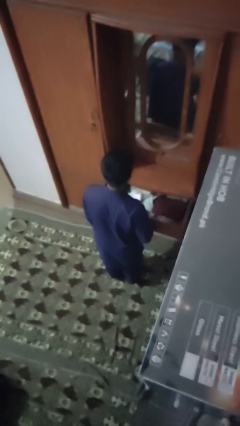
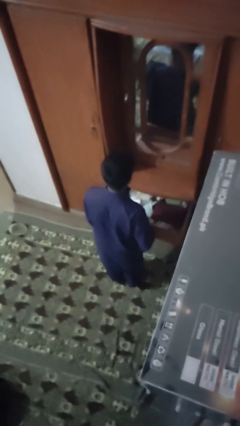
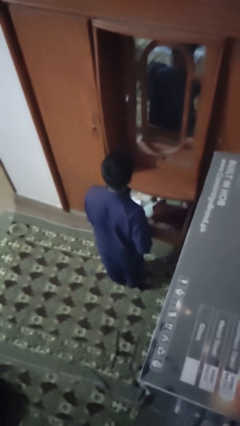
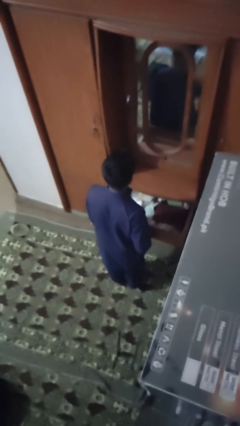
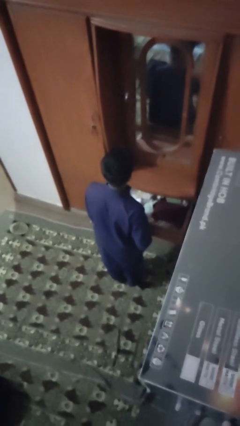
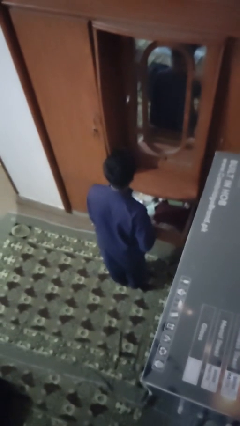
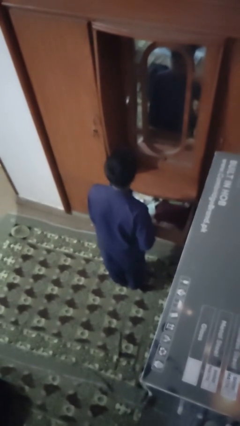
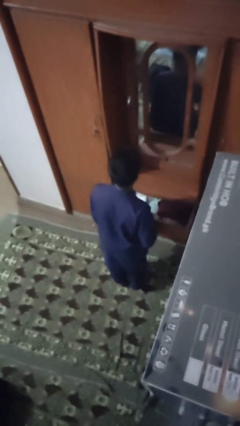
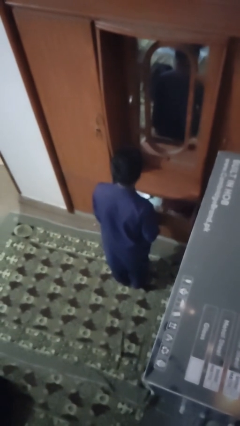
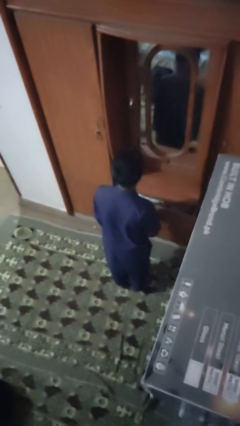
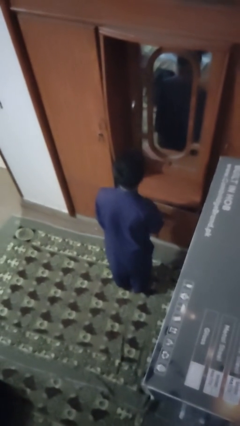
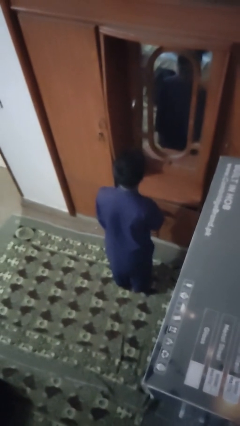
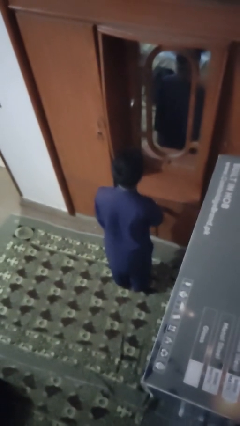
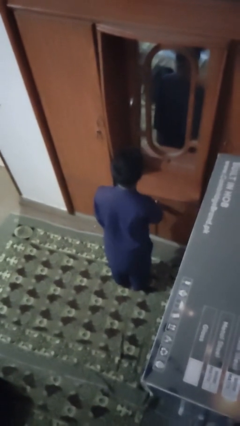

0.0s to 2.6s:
person closes dresser drawer

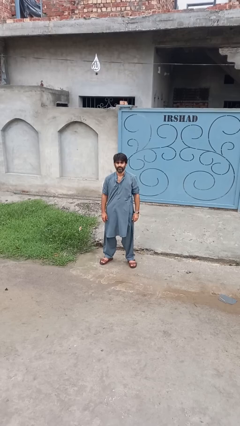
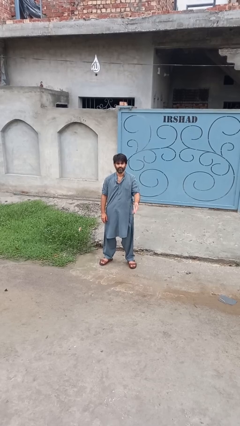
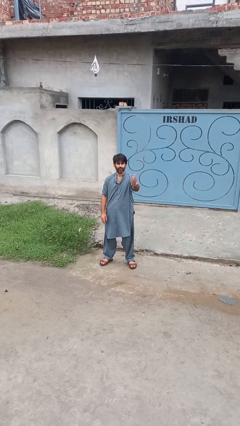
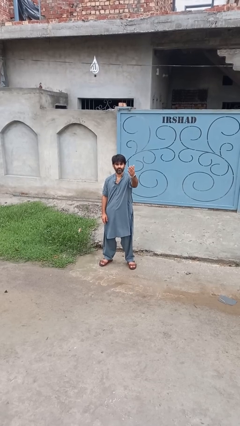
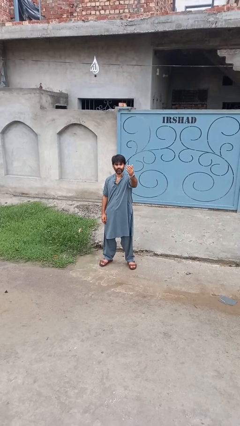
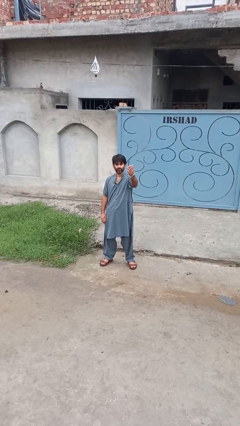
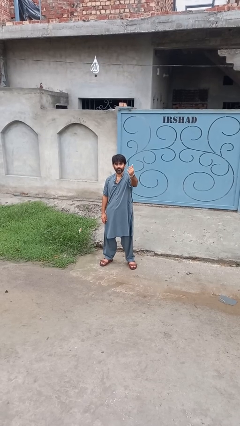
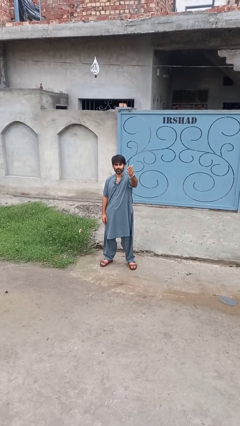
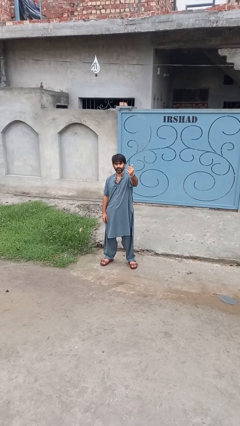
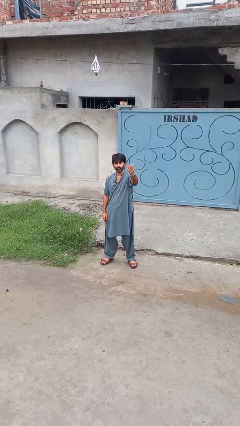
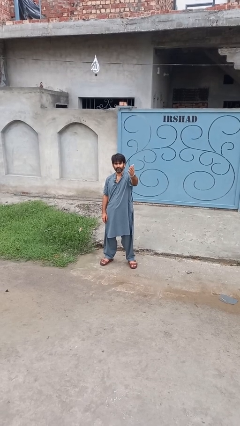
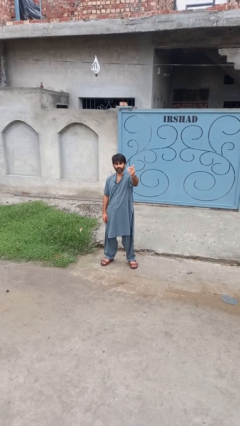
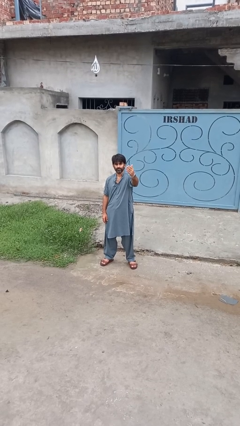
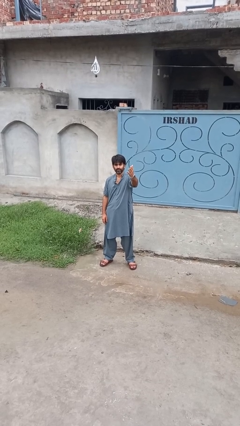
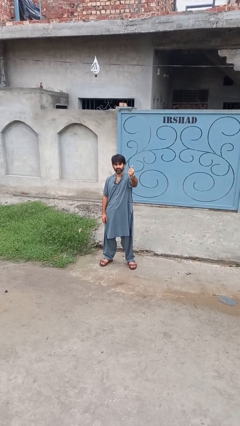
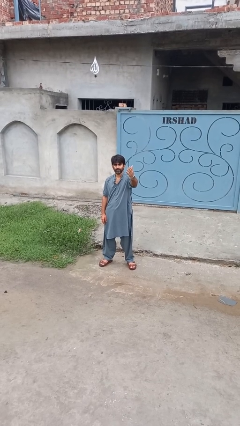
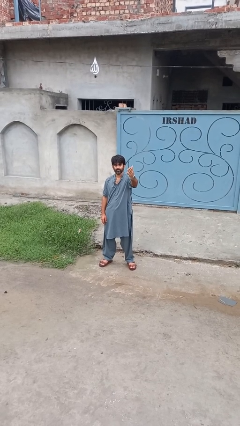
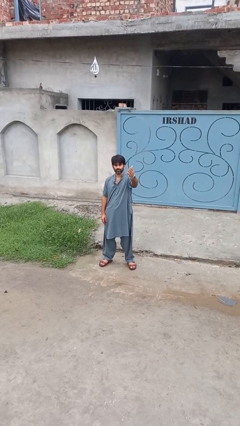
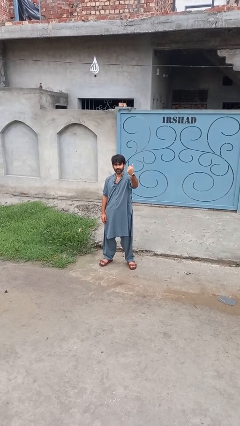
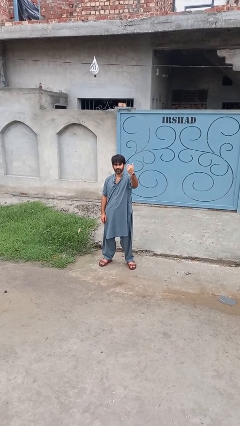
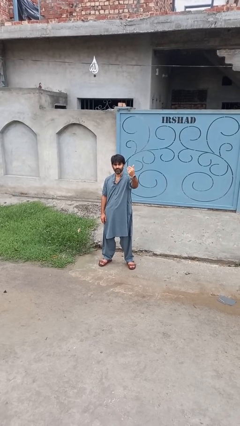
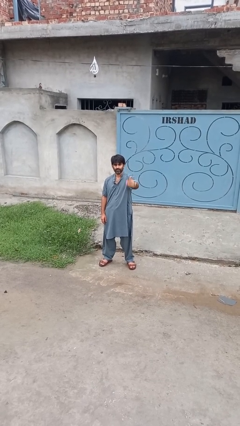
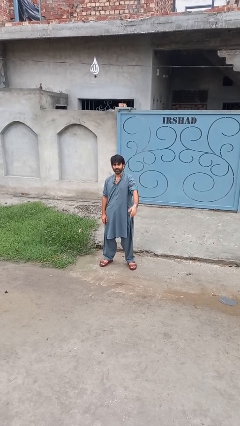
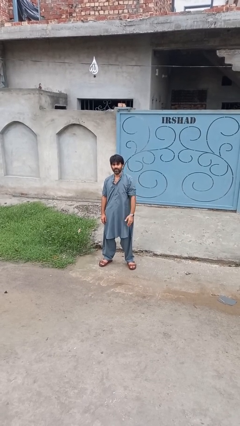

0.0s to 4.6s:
person gestures come here

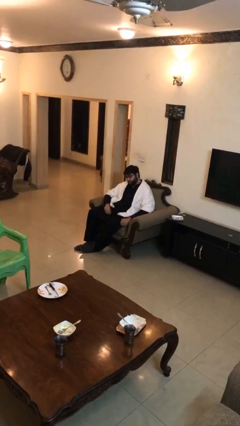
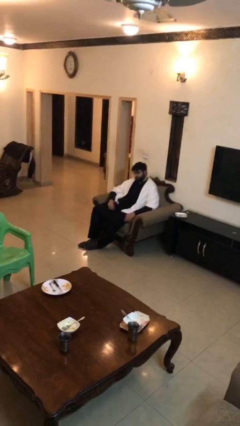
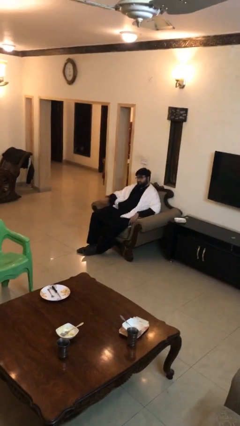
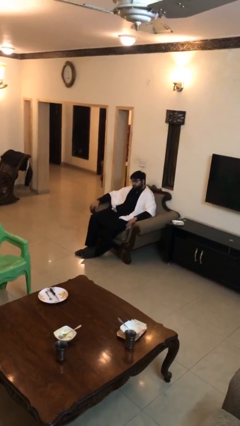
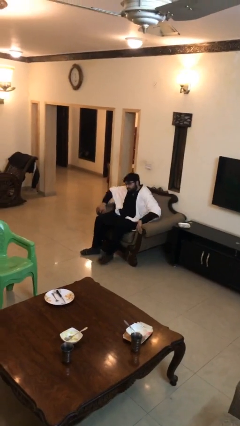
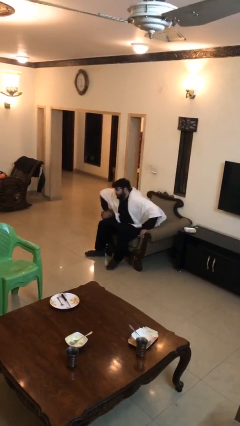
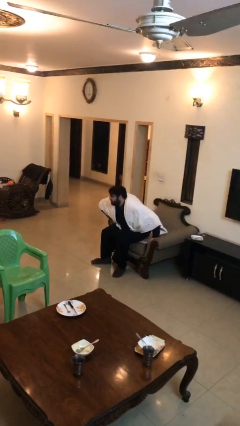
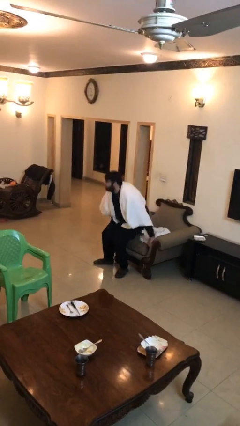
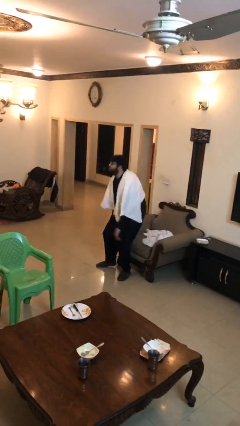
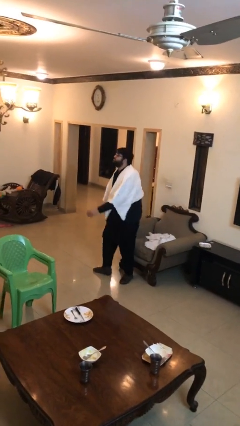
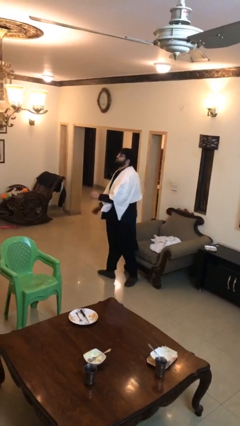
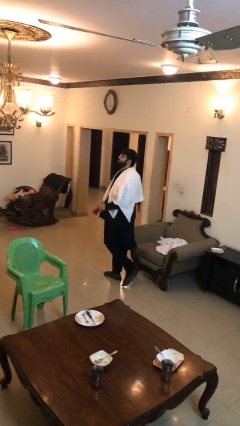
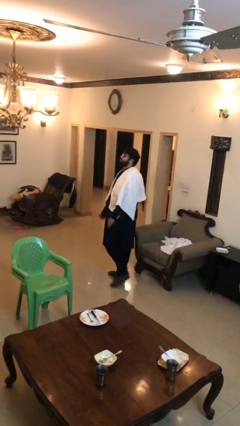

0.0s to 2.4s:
person stands up

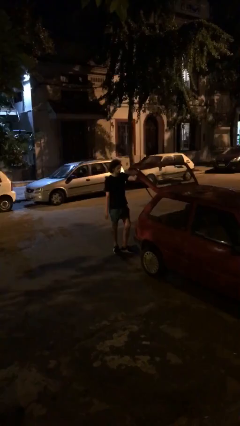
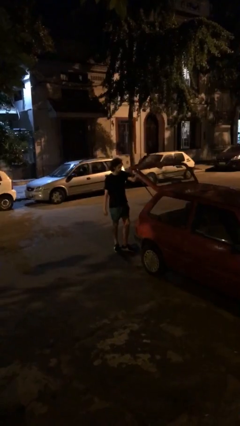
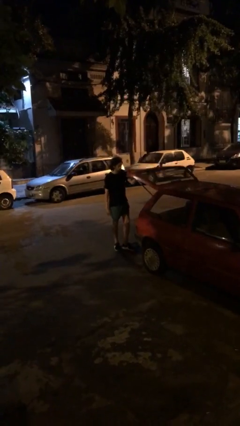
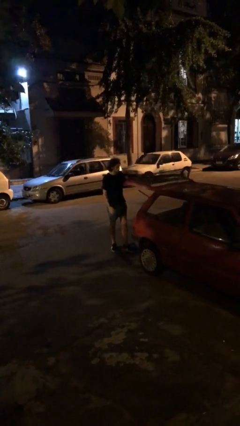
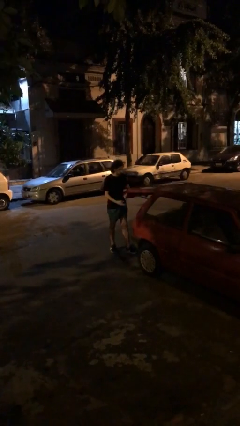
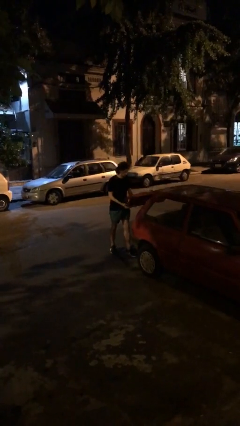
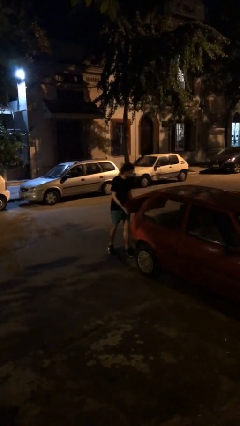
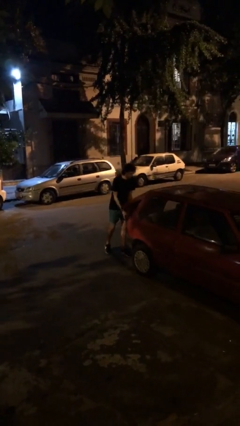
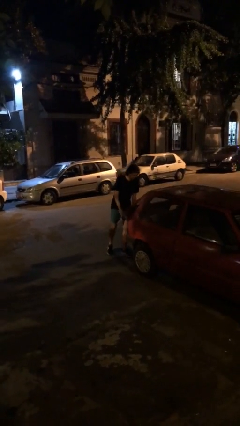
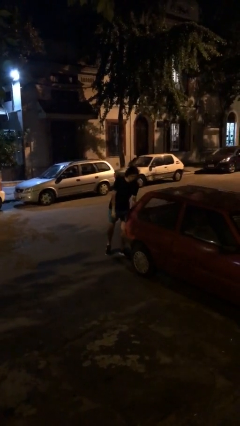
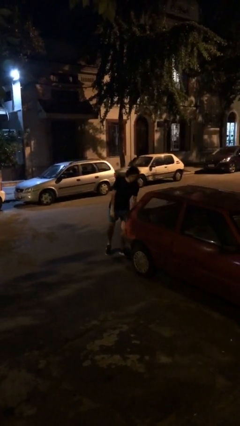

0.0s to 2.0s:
person closes car trunk

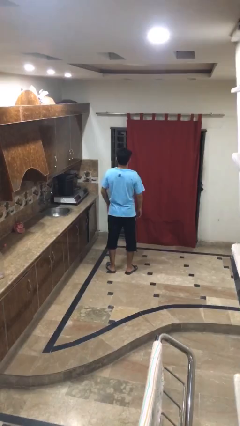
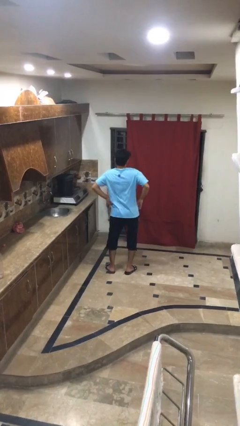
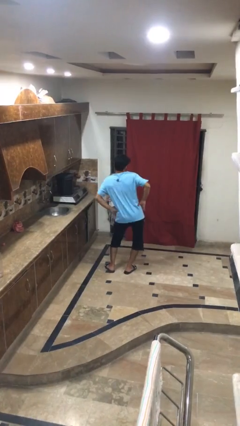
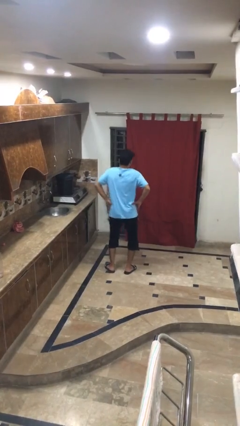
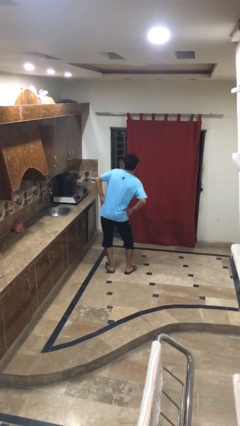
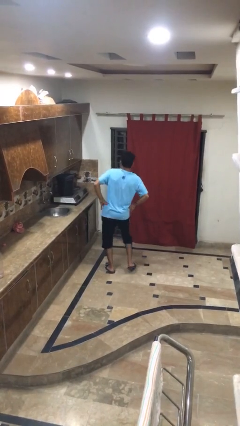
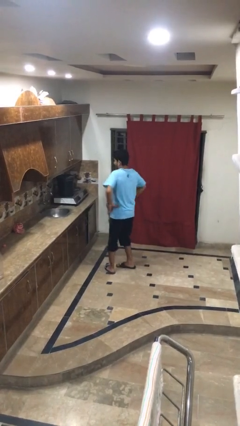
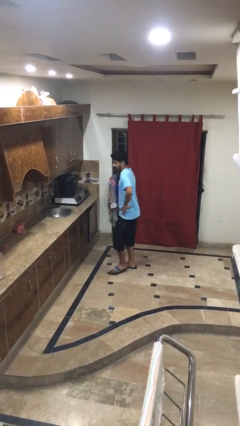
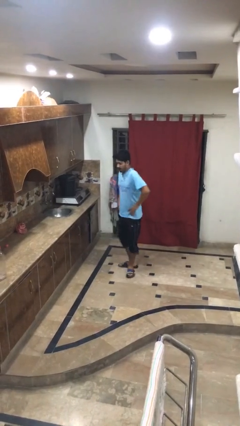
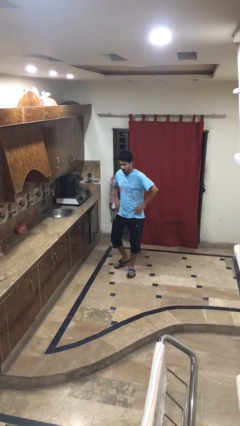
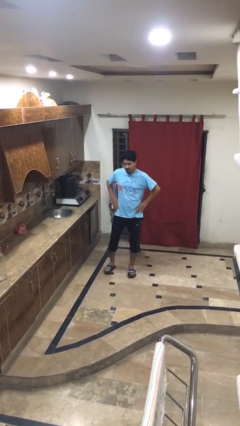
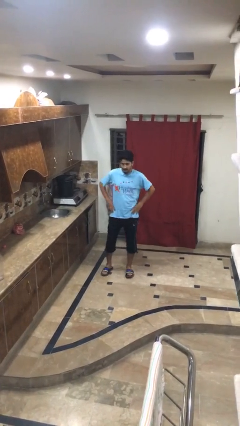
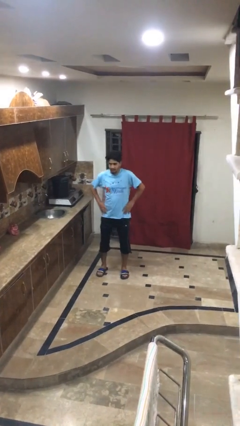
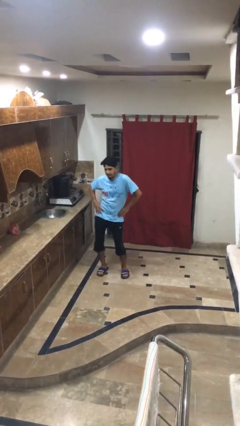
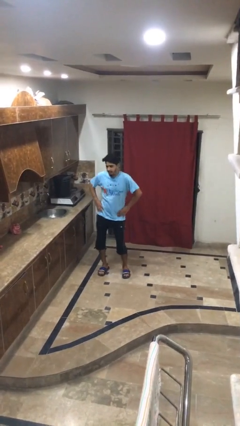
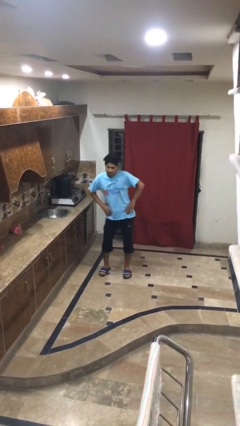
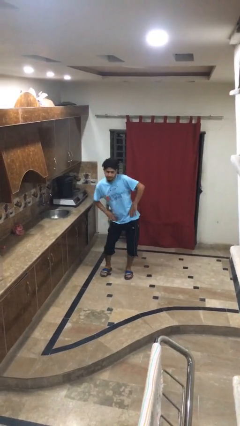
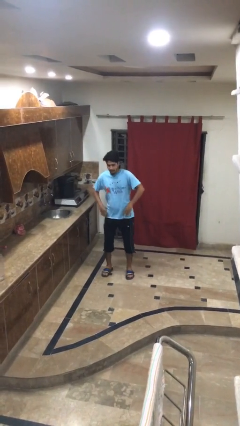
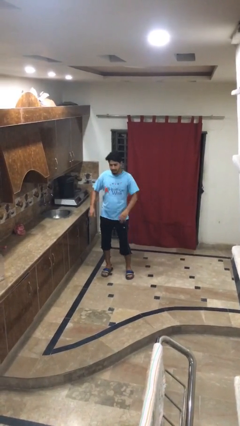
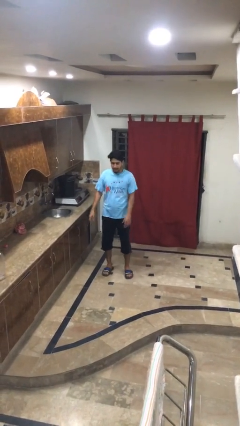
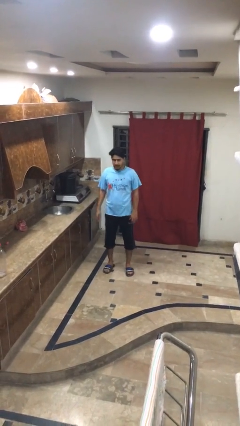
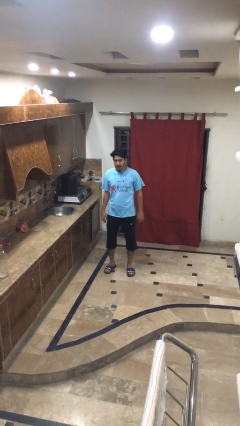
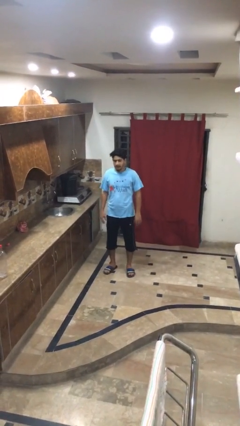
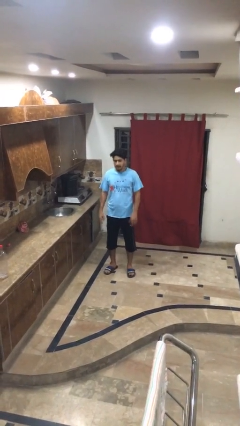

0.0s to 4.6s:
person wiggles hips

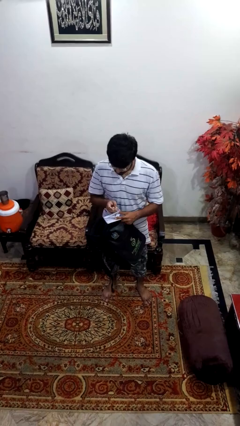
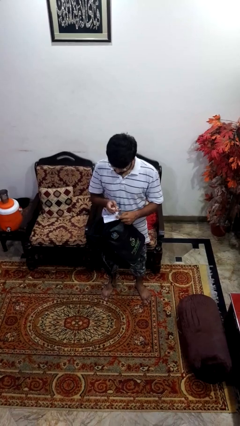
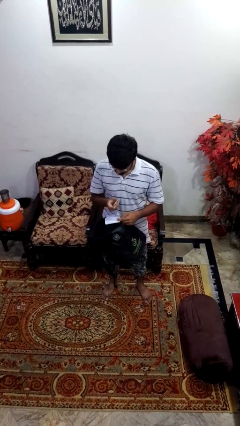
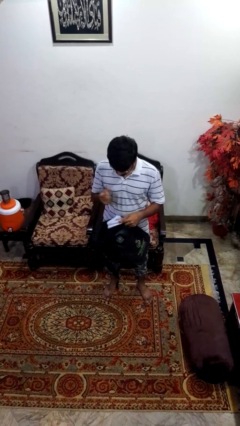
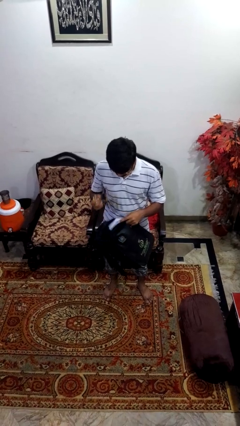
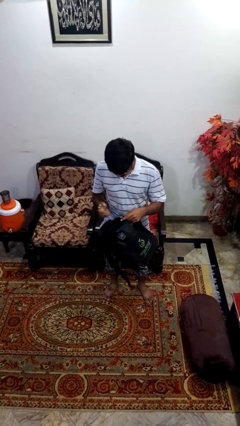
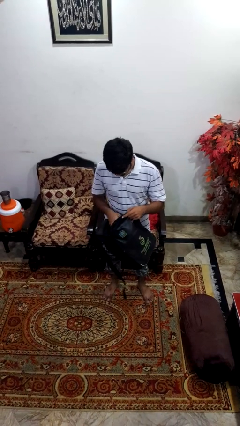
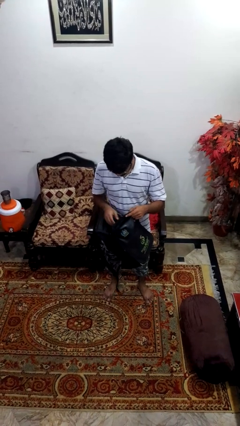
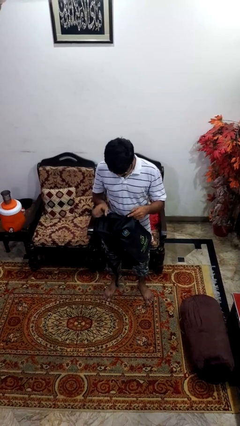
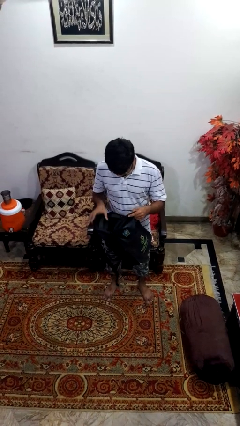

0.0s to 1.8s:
person puts object into backpack
